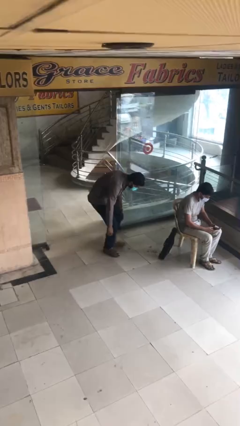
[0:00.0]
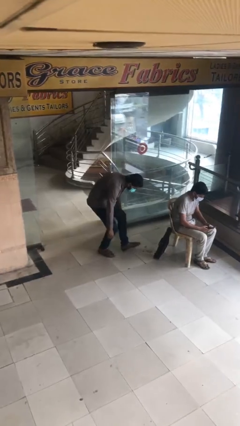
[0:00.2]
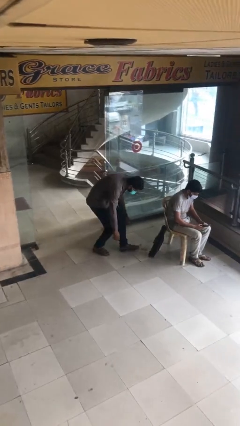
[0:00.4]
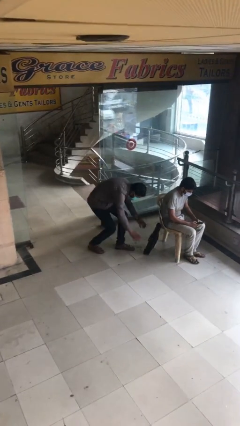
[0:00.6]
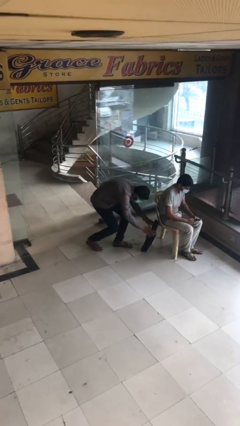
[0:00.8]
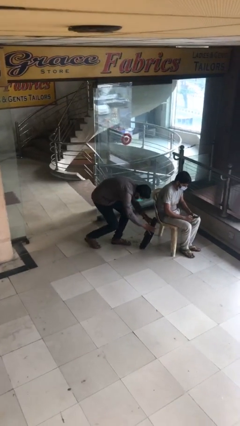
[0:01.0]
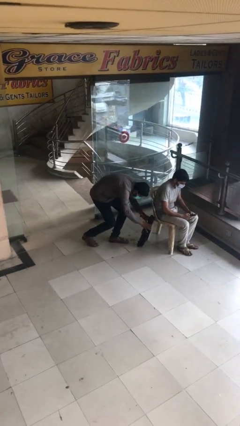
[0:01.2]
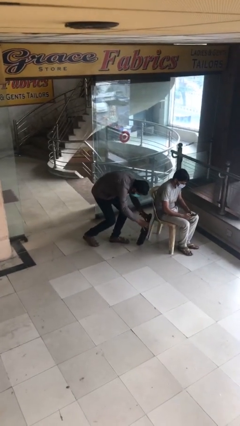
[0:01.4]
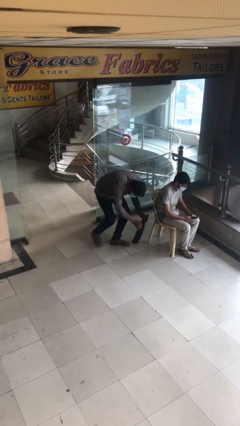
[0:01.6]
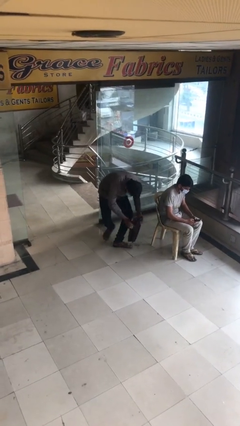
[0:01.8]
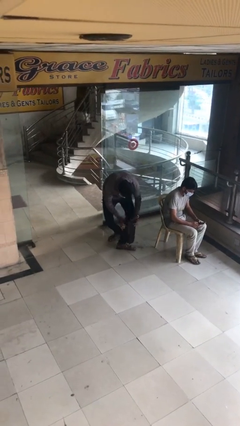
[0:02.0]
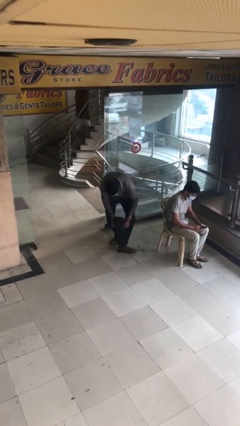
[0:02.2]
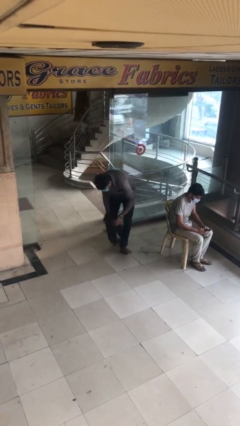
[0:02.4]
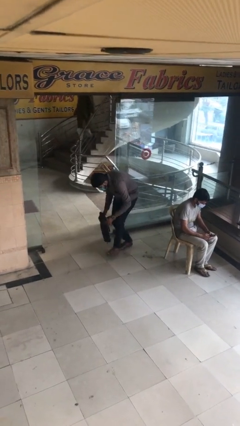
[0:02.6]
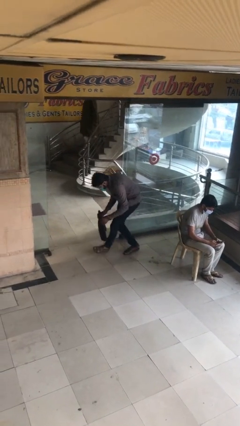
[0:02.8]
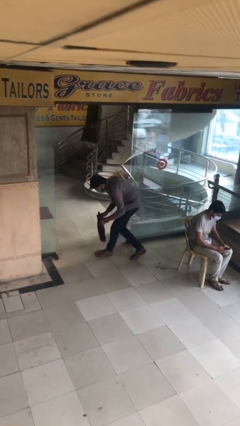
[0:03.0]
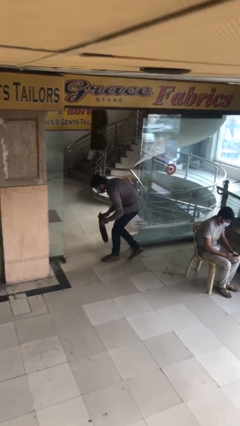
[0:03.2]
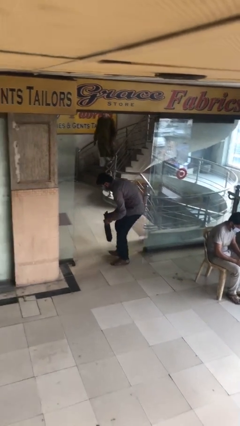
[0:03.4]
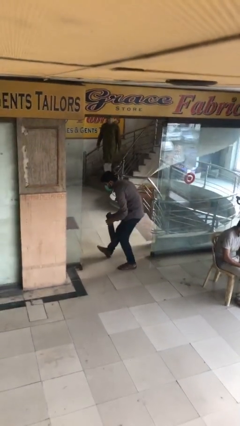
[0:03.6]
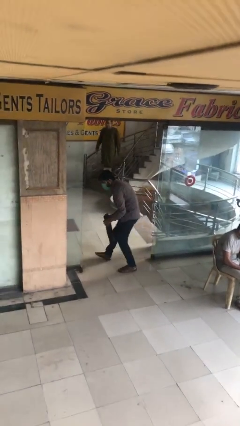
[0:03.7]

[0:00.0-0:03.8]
person steals object from person

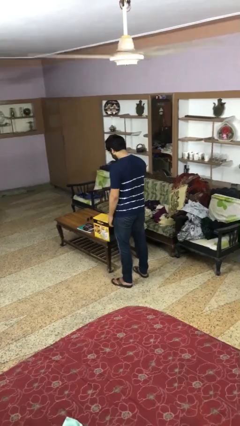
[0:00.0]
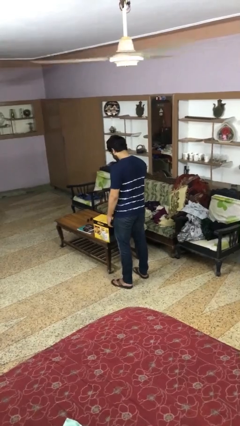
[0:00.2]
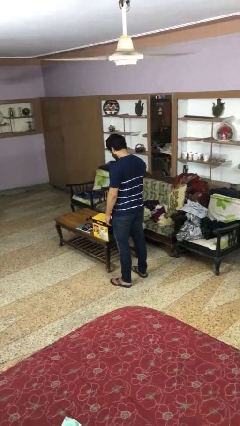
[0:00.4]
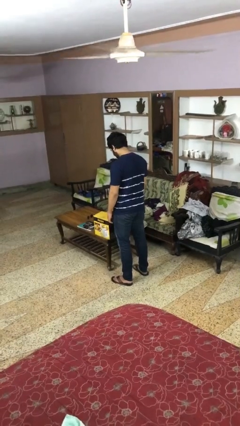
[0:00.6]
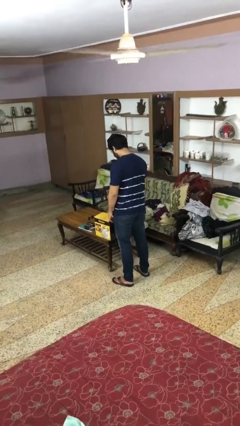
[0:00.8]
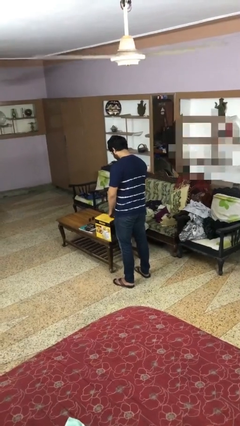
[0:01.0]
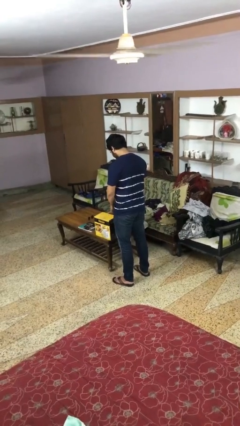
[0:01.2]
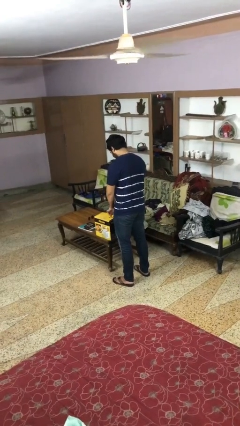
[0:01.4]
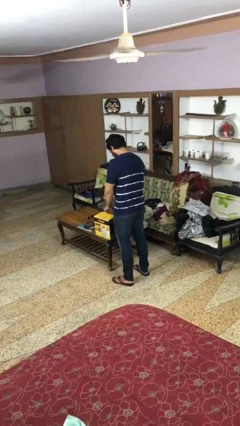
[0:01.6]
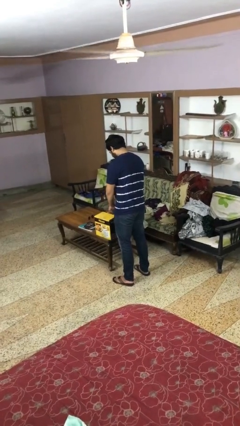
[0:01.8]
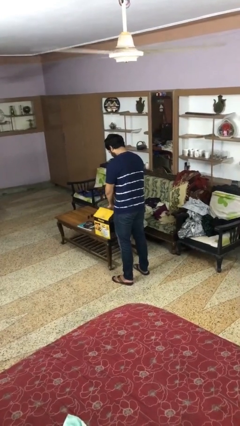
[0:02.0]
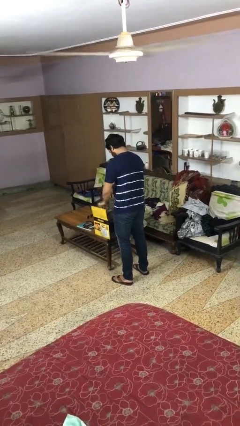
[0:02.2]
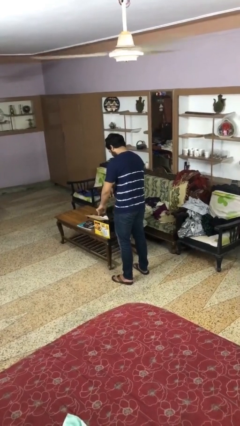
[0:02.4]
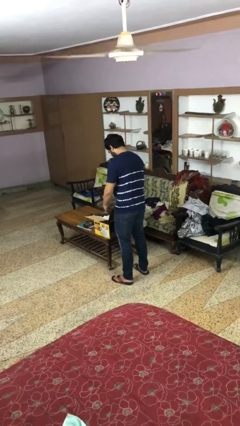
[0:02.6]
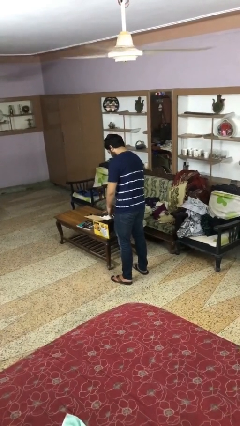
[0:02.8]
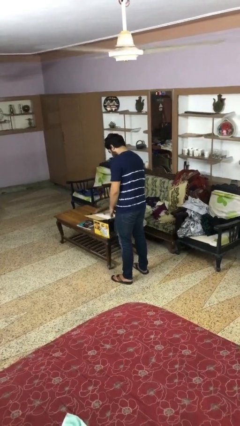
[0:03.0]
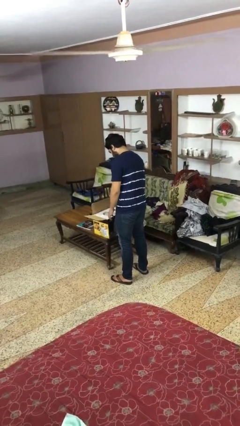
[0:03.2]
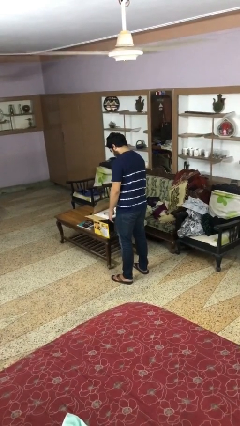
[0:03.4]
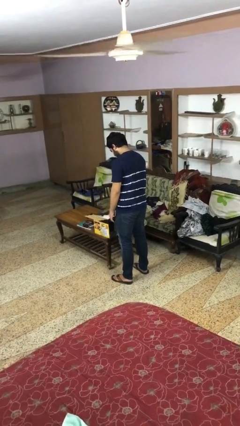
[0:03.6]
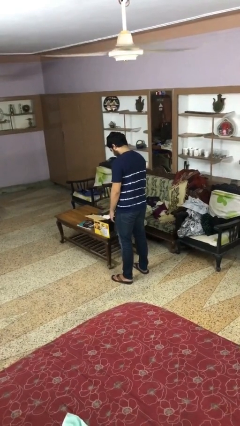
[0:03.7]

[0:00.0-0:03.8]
person opens box

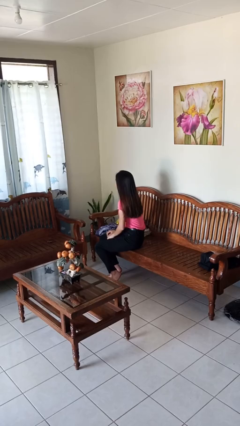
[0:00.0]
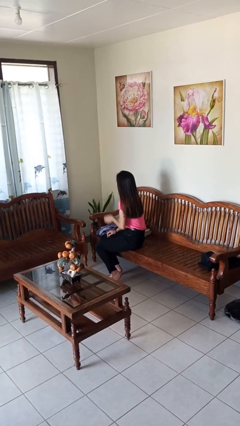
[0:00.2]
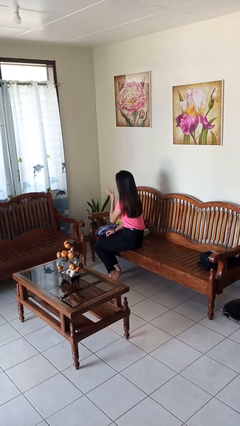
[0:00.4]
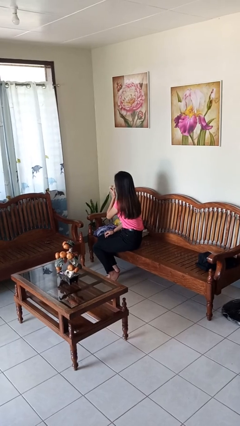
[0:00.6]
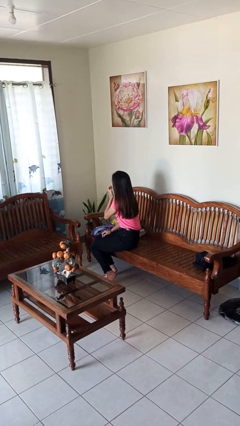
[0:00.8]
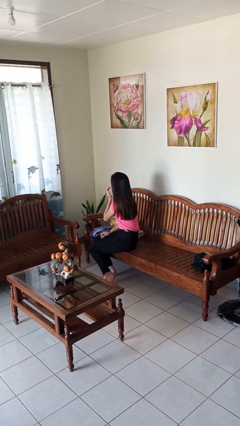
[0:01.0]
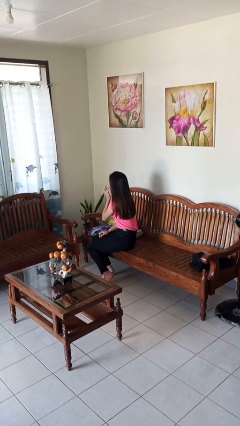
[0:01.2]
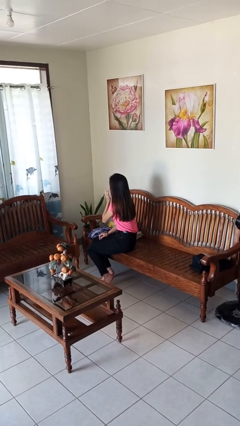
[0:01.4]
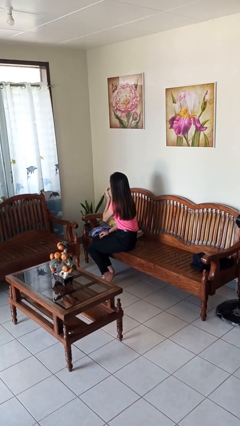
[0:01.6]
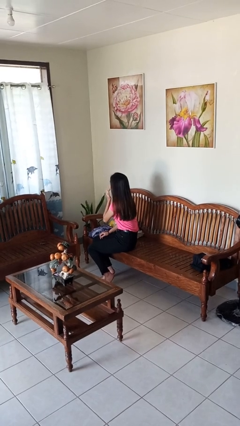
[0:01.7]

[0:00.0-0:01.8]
person licks fingers

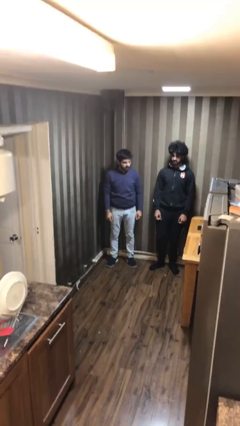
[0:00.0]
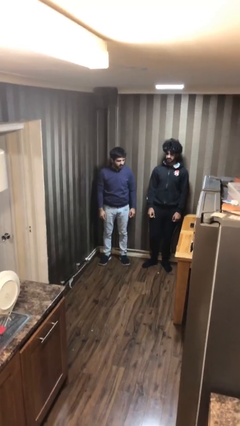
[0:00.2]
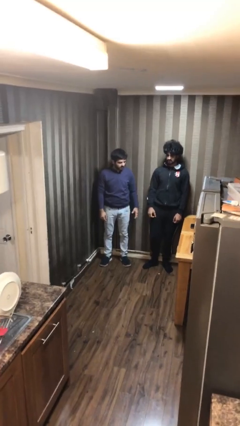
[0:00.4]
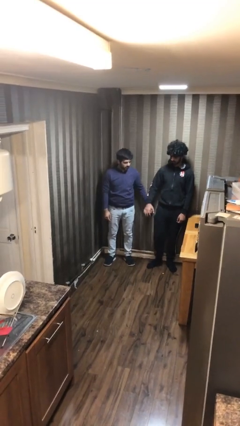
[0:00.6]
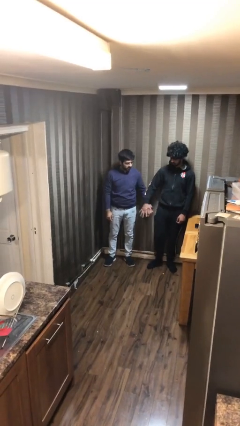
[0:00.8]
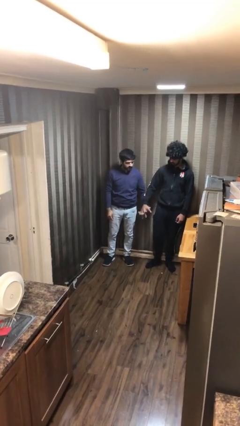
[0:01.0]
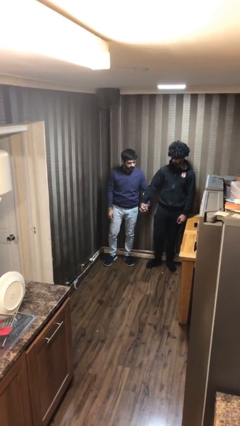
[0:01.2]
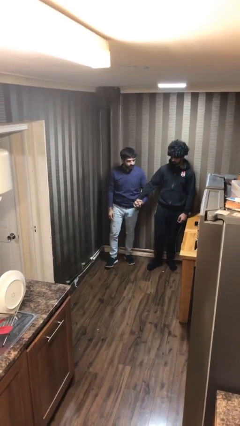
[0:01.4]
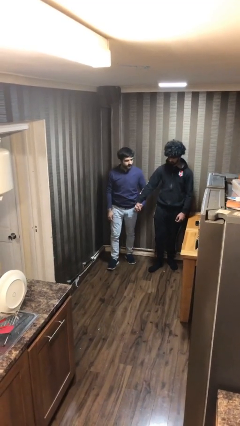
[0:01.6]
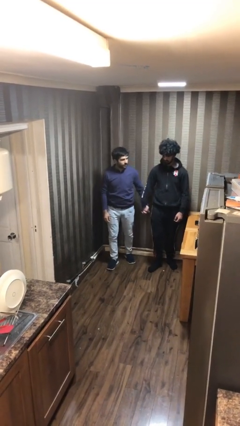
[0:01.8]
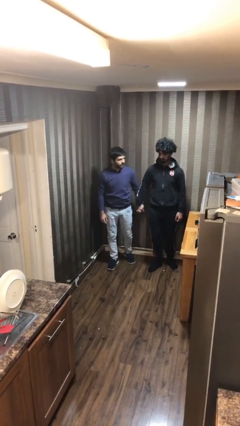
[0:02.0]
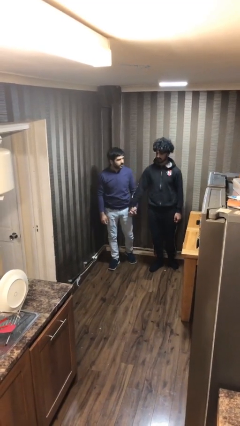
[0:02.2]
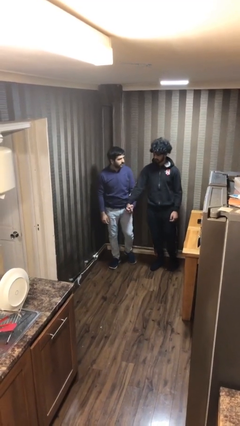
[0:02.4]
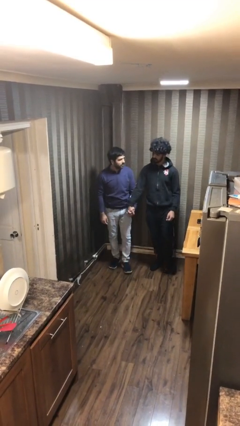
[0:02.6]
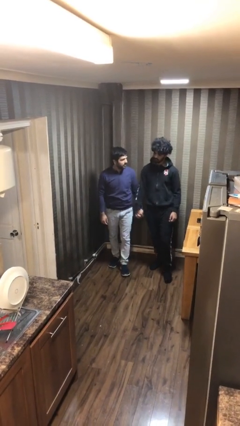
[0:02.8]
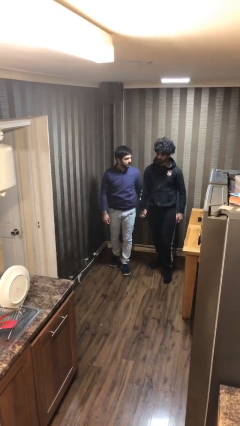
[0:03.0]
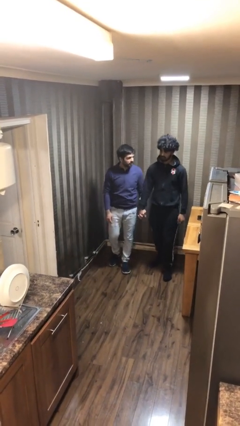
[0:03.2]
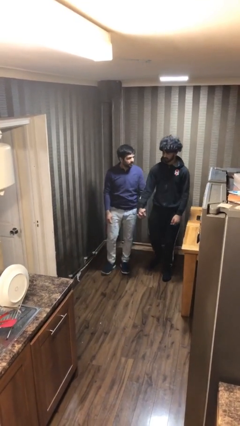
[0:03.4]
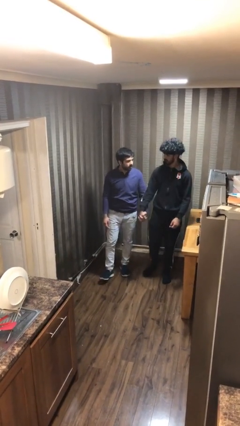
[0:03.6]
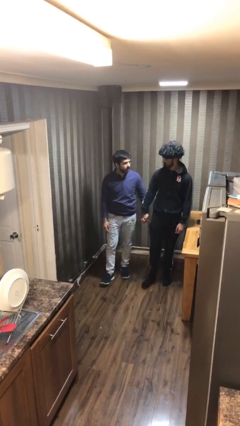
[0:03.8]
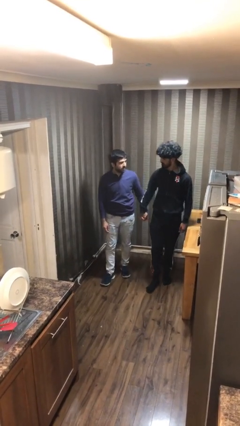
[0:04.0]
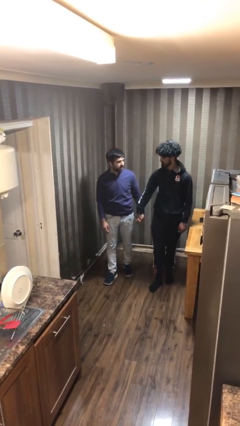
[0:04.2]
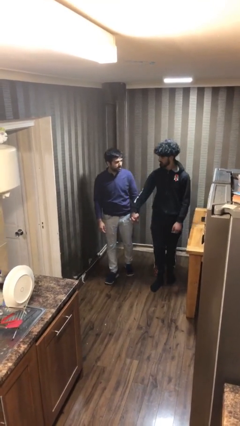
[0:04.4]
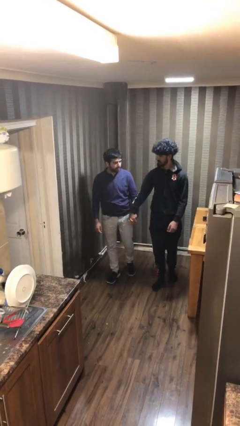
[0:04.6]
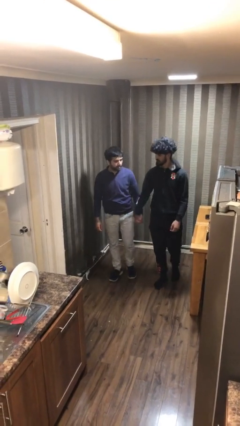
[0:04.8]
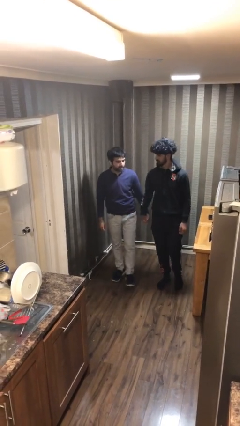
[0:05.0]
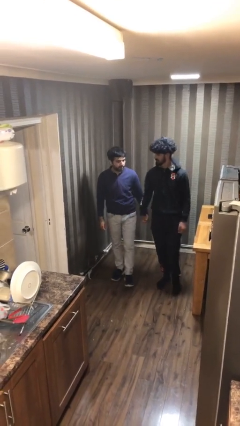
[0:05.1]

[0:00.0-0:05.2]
person holds hand

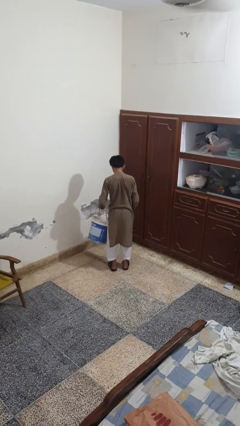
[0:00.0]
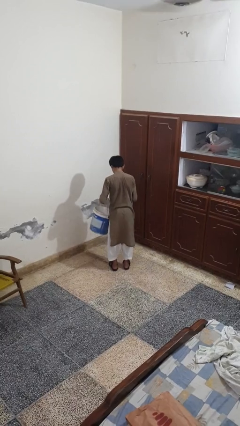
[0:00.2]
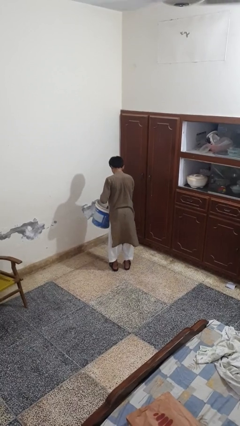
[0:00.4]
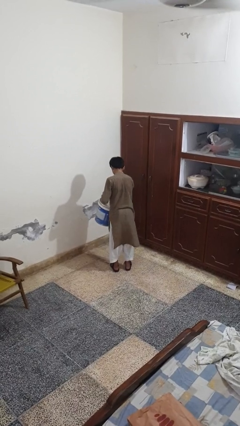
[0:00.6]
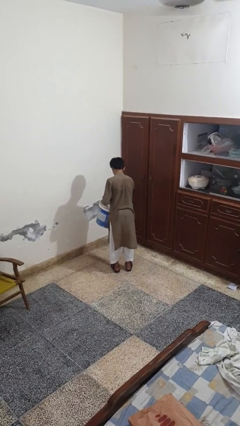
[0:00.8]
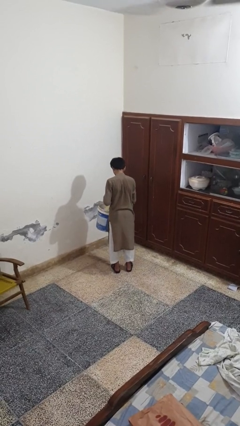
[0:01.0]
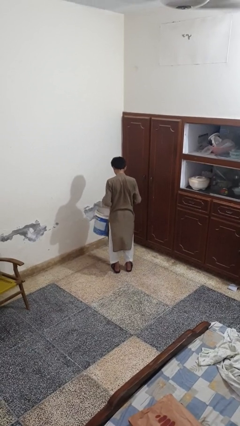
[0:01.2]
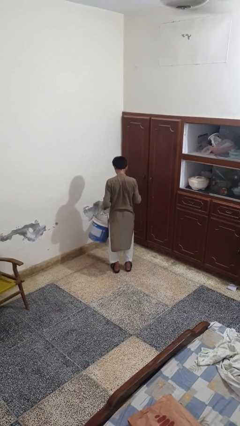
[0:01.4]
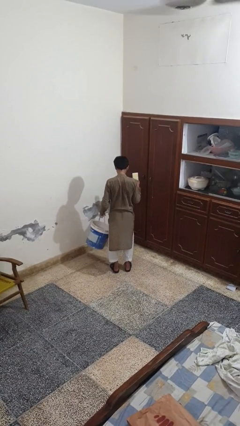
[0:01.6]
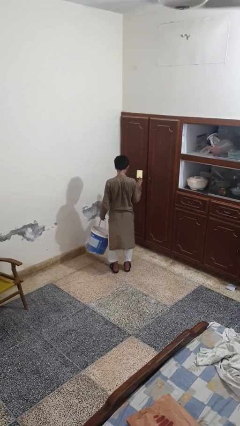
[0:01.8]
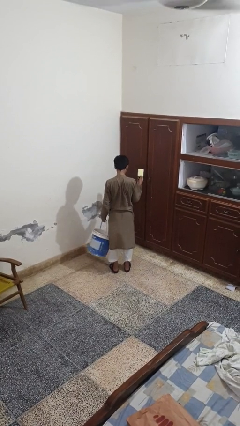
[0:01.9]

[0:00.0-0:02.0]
person takes object from basket

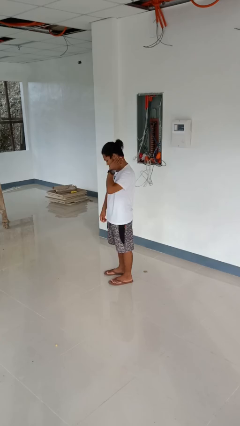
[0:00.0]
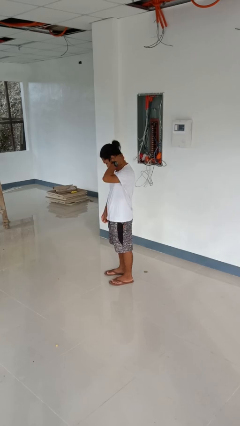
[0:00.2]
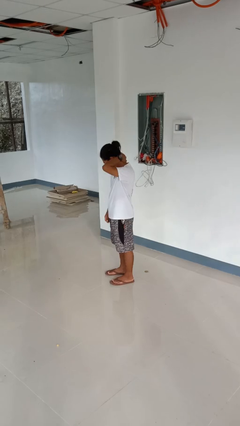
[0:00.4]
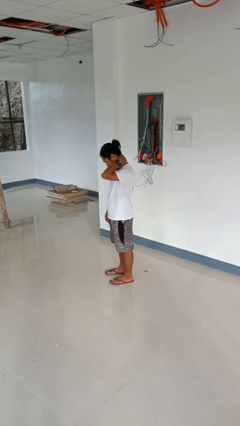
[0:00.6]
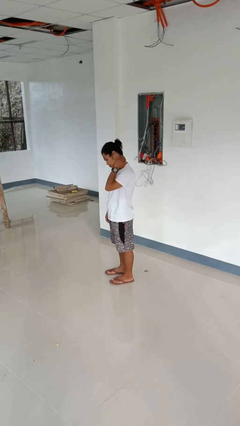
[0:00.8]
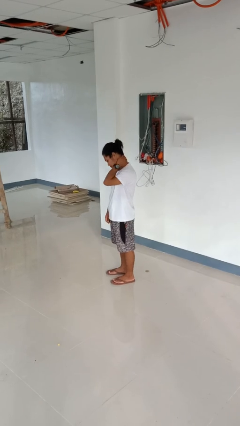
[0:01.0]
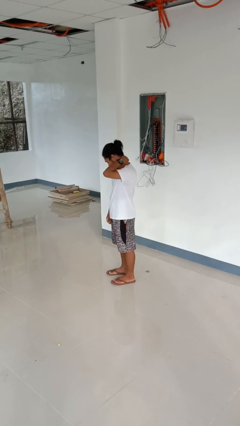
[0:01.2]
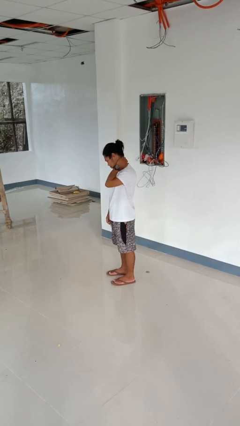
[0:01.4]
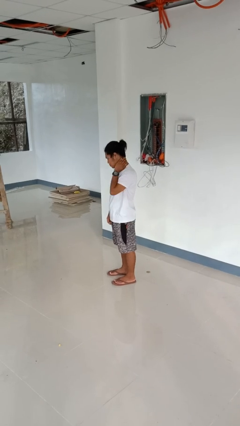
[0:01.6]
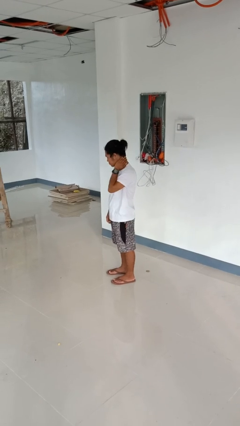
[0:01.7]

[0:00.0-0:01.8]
person rubs neck
